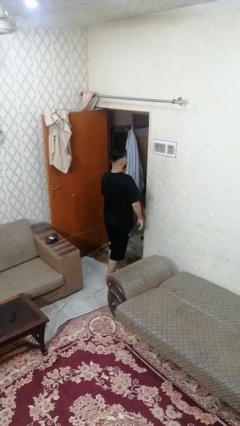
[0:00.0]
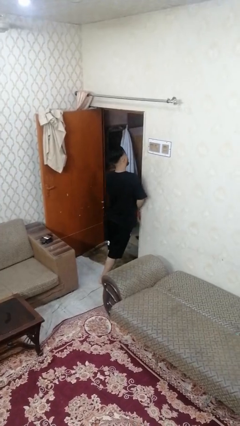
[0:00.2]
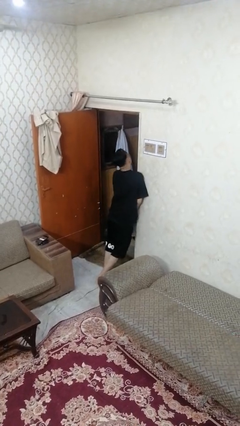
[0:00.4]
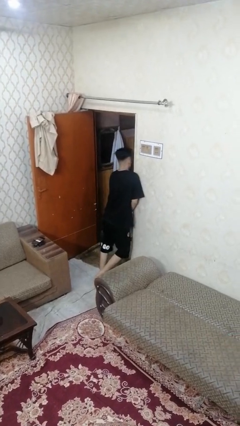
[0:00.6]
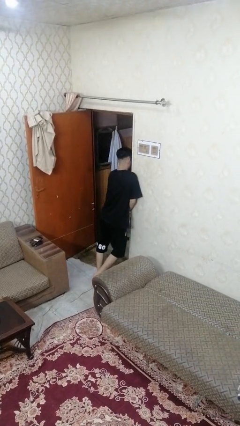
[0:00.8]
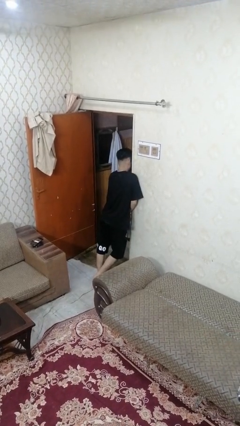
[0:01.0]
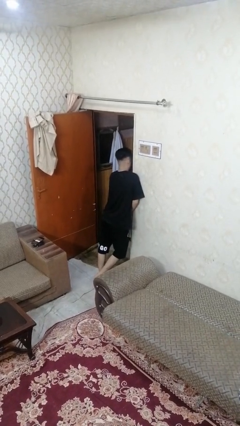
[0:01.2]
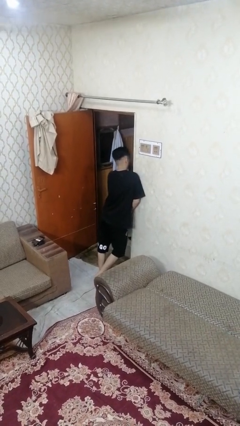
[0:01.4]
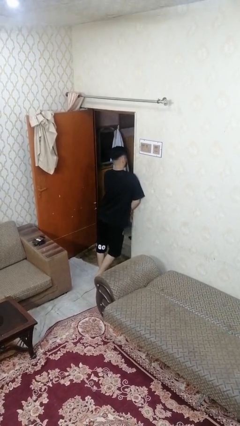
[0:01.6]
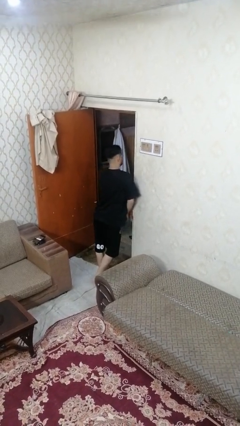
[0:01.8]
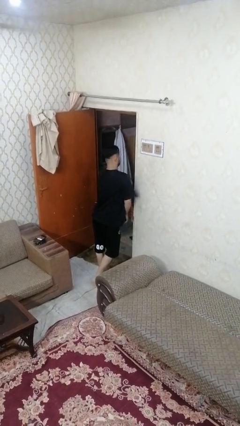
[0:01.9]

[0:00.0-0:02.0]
person bumps into wall

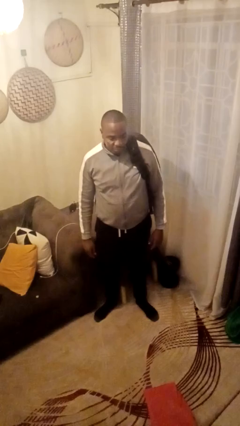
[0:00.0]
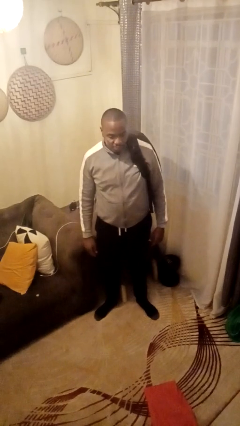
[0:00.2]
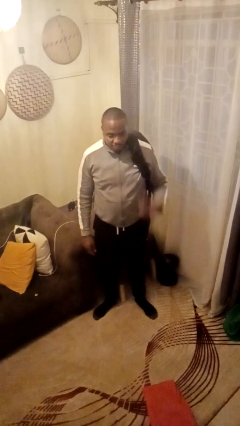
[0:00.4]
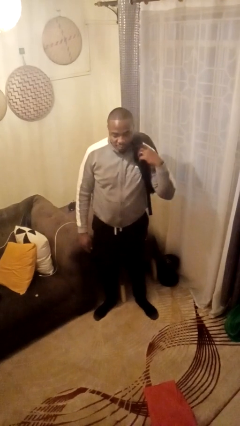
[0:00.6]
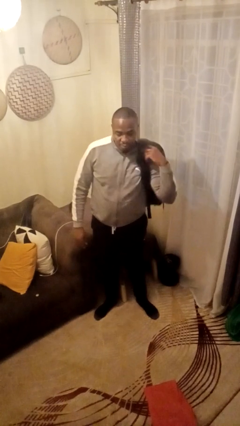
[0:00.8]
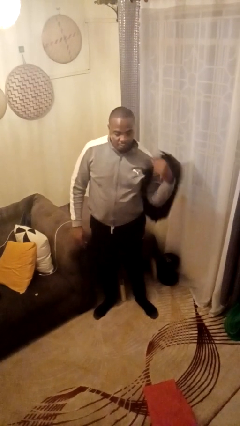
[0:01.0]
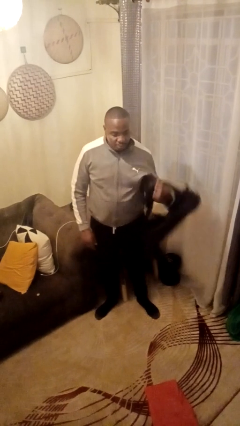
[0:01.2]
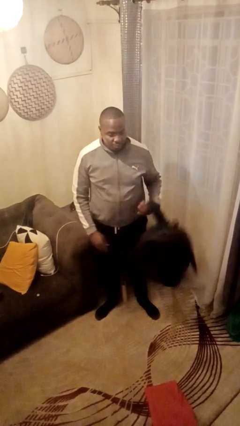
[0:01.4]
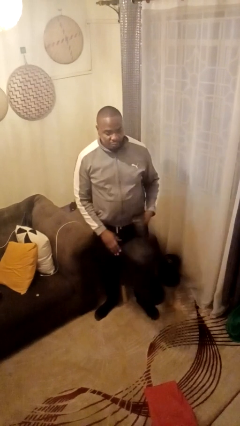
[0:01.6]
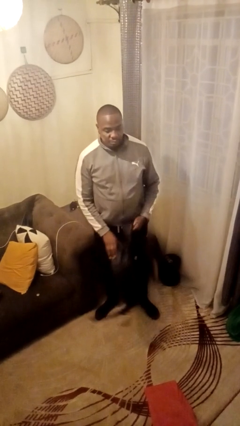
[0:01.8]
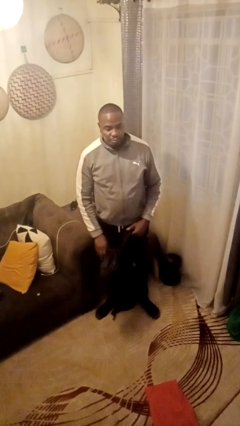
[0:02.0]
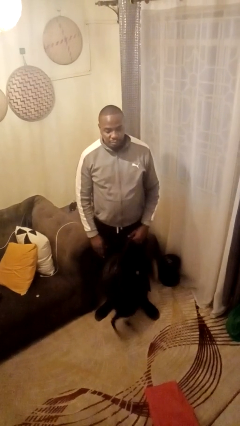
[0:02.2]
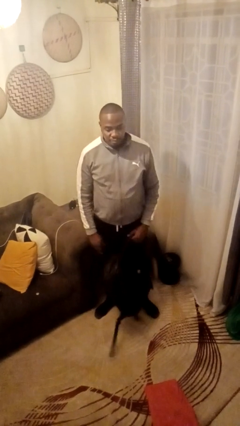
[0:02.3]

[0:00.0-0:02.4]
person takes off backpack

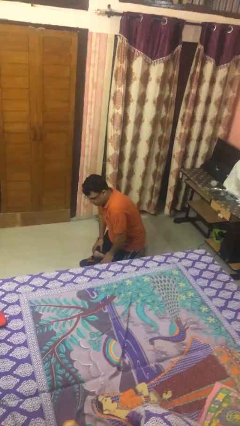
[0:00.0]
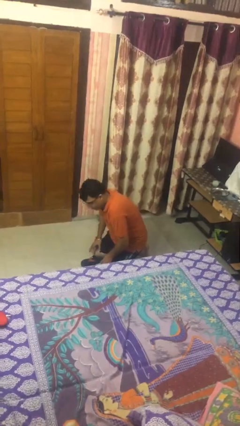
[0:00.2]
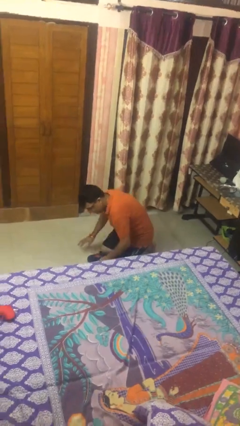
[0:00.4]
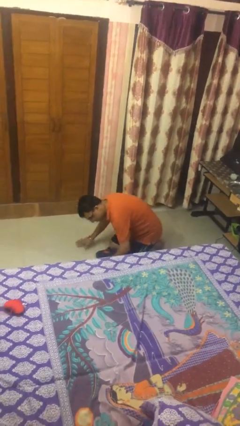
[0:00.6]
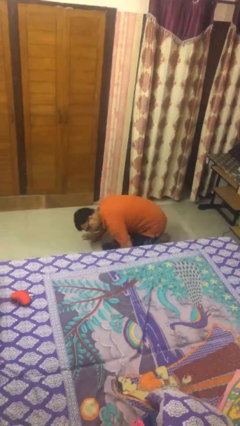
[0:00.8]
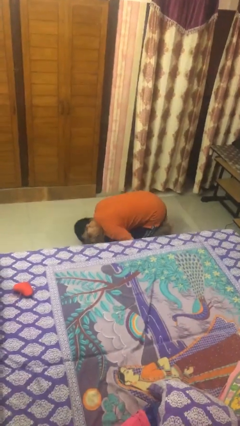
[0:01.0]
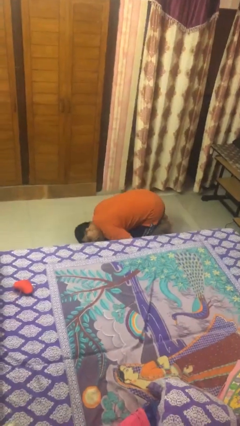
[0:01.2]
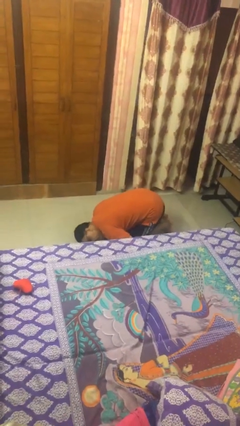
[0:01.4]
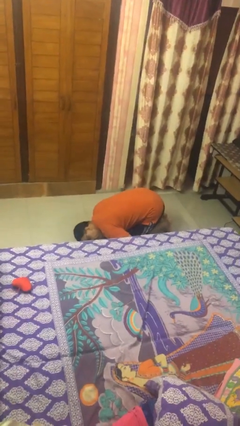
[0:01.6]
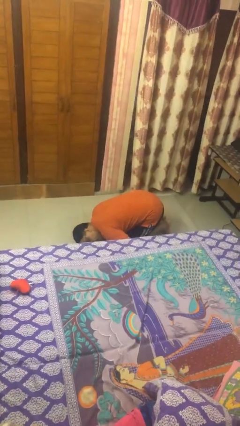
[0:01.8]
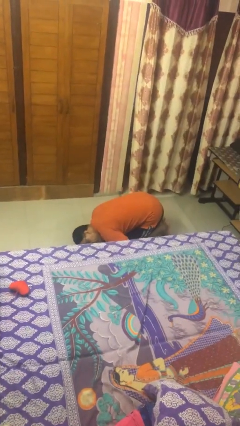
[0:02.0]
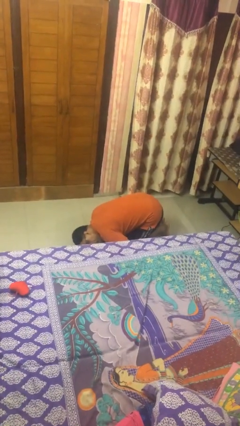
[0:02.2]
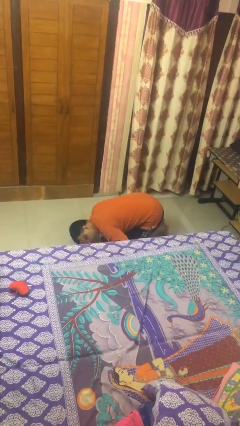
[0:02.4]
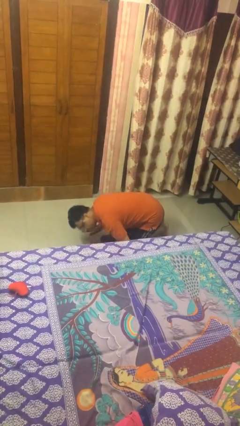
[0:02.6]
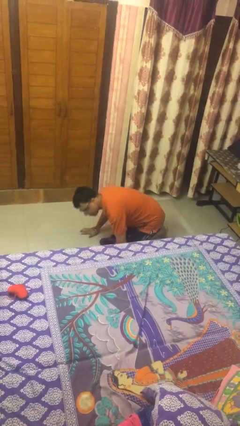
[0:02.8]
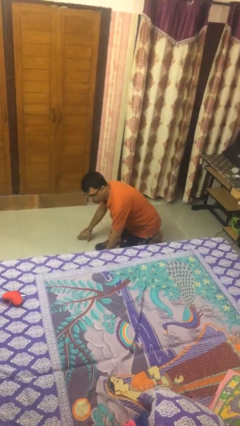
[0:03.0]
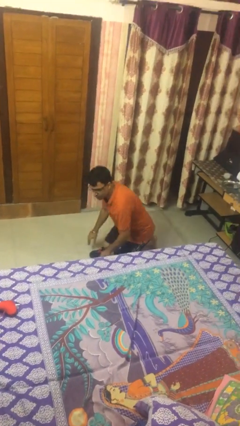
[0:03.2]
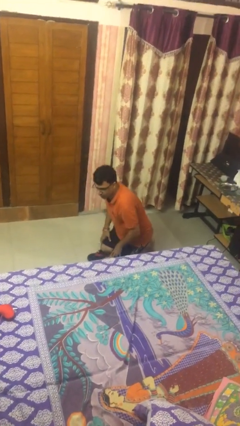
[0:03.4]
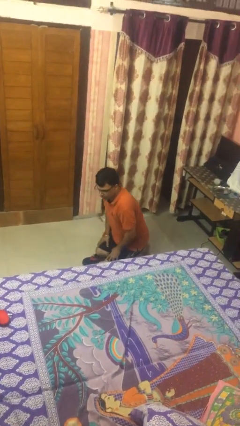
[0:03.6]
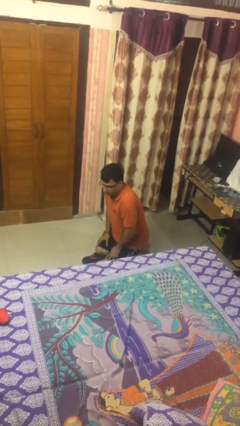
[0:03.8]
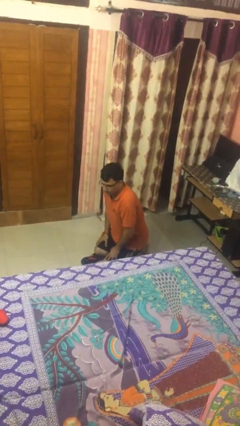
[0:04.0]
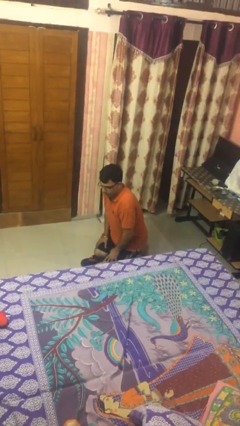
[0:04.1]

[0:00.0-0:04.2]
person searches under bed

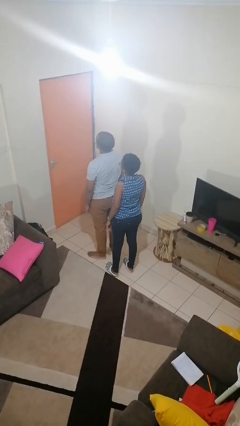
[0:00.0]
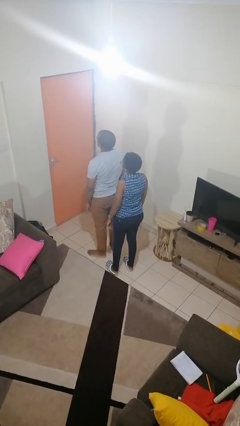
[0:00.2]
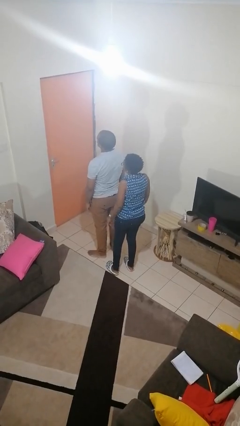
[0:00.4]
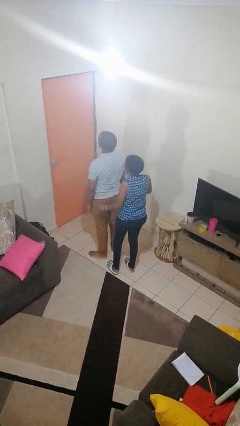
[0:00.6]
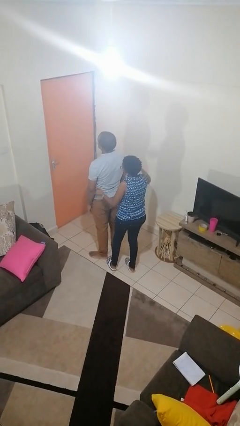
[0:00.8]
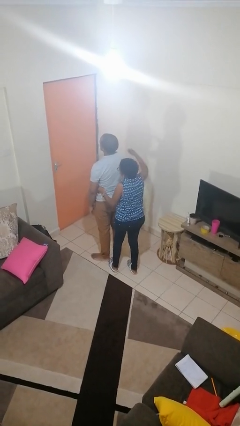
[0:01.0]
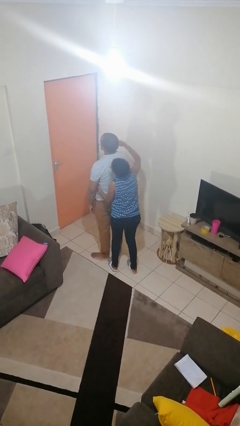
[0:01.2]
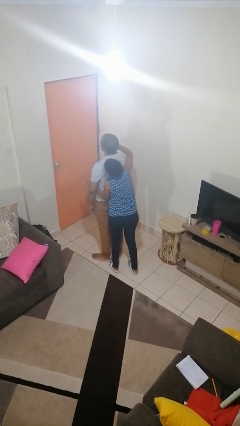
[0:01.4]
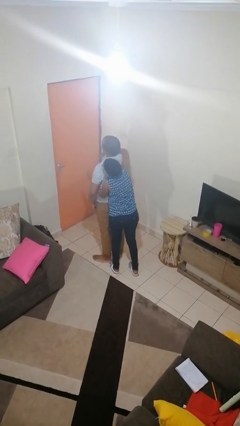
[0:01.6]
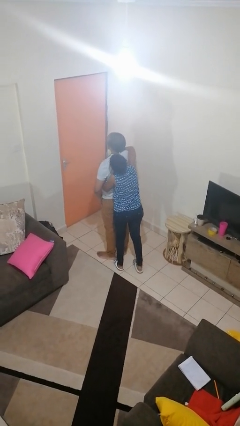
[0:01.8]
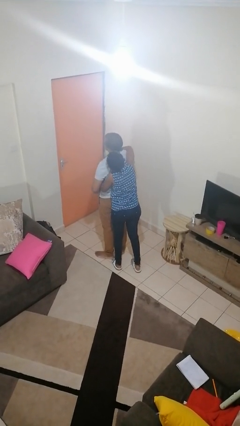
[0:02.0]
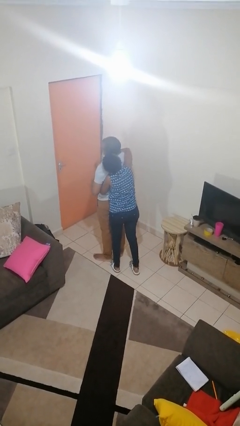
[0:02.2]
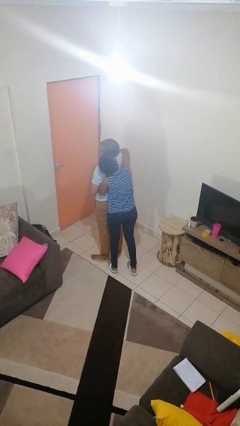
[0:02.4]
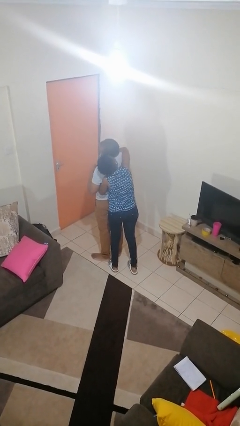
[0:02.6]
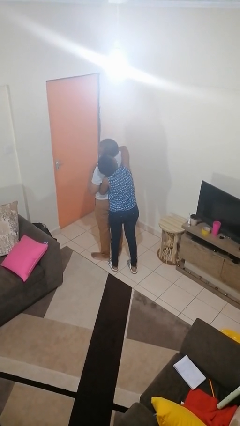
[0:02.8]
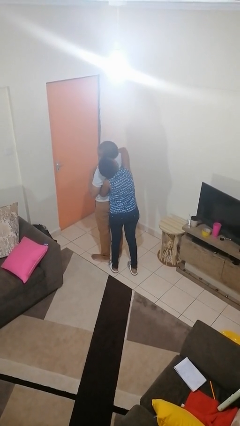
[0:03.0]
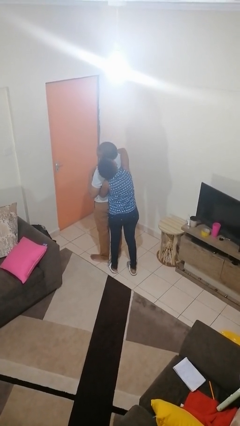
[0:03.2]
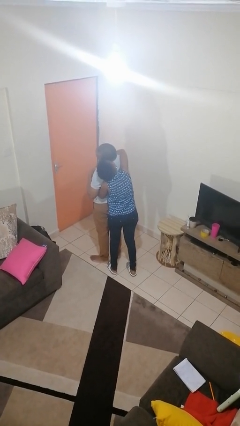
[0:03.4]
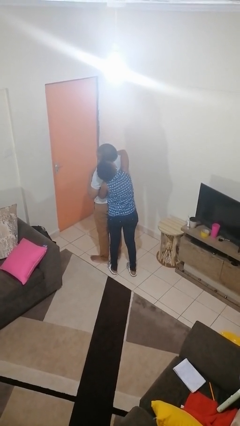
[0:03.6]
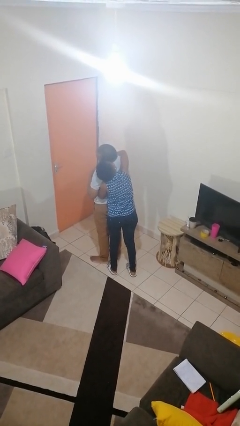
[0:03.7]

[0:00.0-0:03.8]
person hugs person from behind

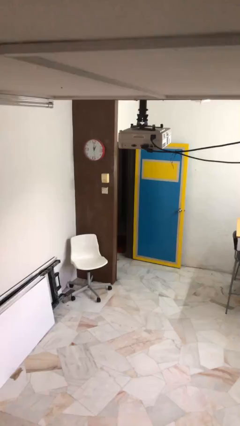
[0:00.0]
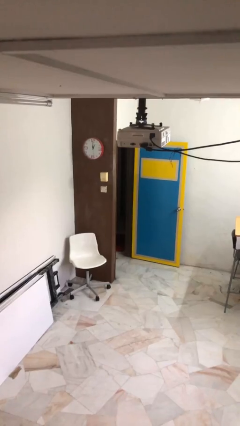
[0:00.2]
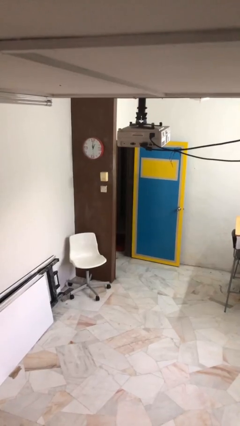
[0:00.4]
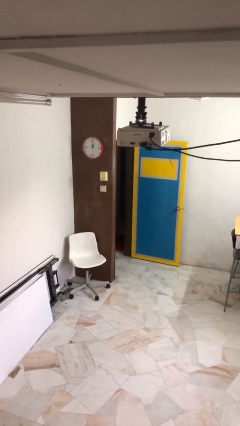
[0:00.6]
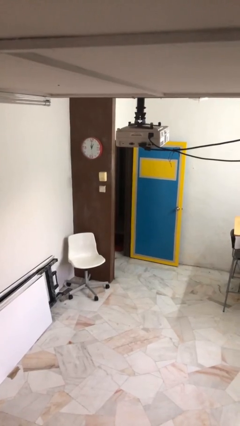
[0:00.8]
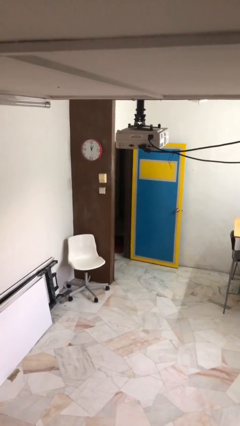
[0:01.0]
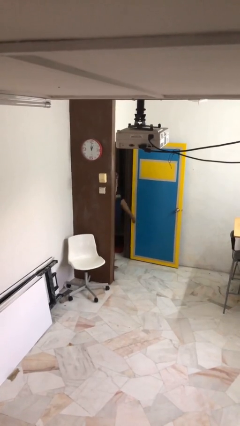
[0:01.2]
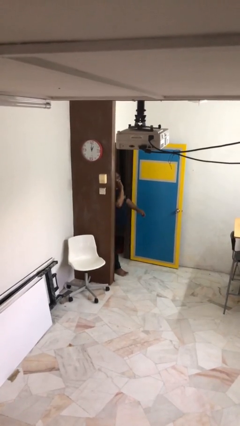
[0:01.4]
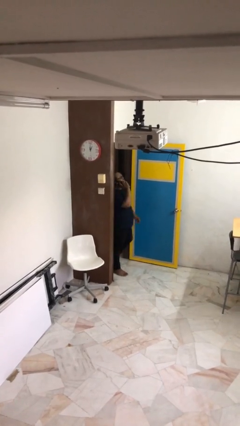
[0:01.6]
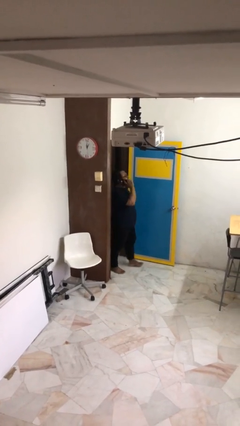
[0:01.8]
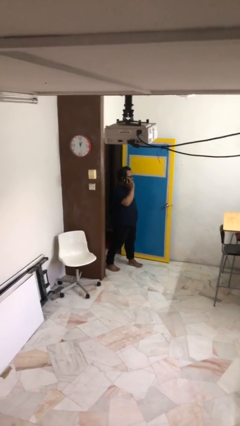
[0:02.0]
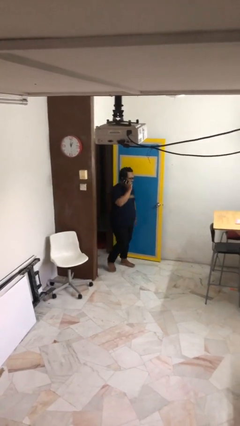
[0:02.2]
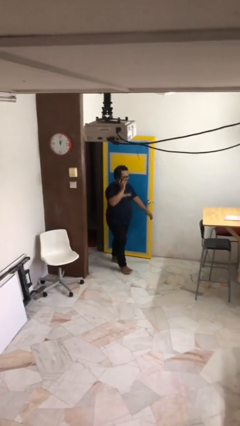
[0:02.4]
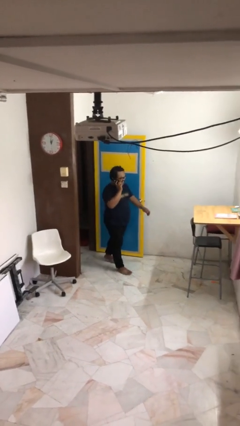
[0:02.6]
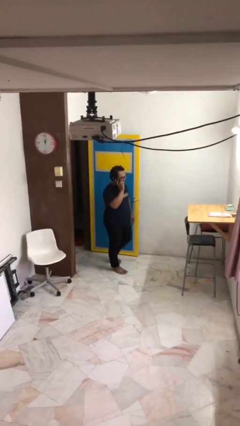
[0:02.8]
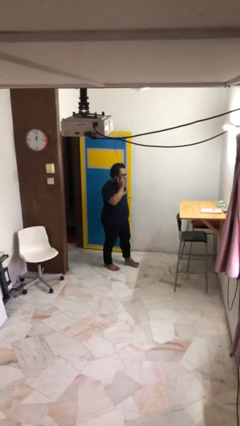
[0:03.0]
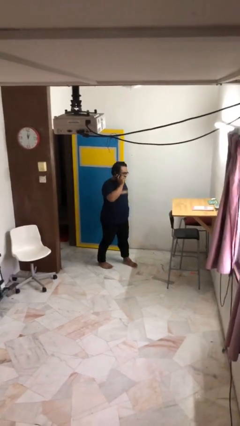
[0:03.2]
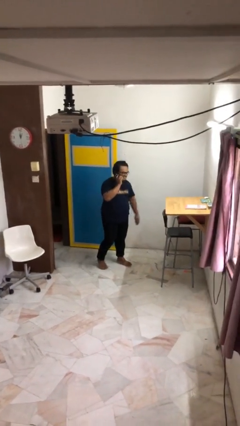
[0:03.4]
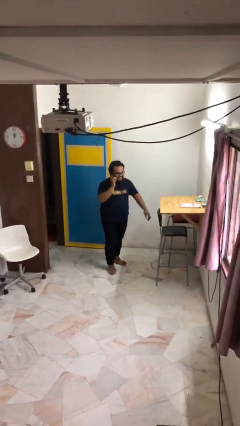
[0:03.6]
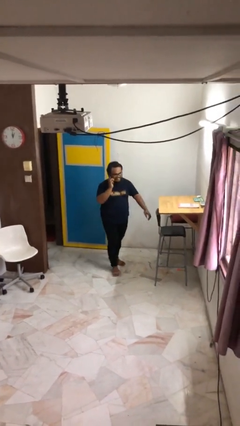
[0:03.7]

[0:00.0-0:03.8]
person enters scene through structure

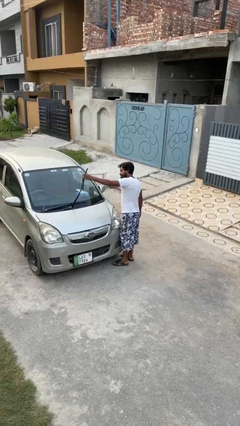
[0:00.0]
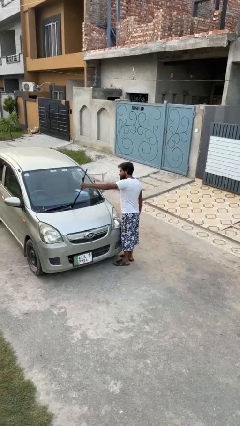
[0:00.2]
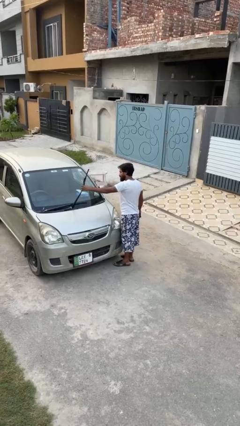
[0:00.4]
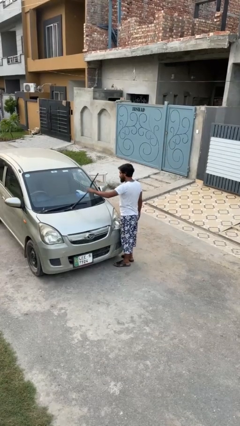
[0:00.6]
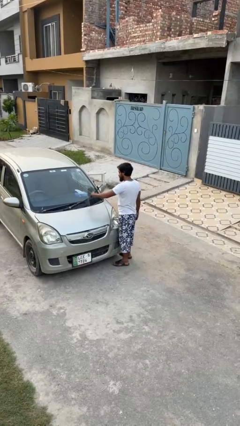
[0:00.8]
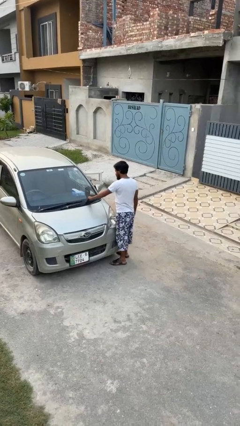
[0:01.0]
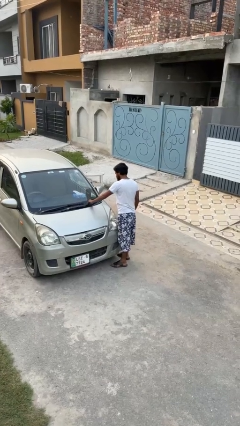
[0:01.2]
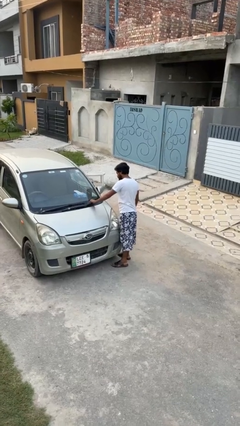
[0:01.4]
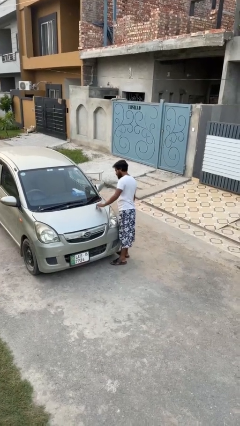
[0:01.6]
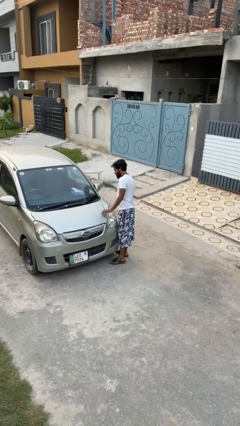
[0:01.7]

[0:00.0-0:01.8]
person flips down car wipers
